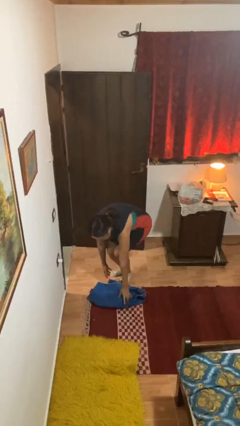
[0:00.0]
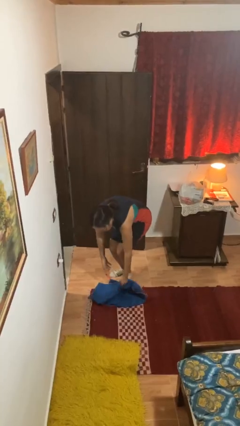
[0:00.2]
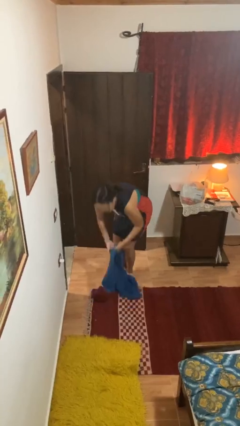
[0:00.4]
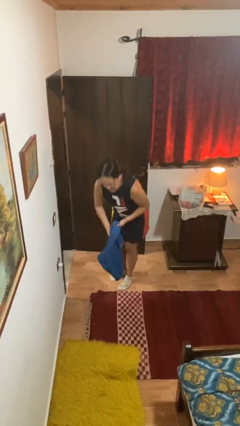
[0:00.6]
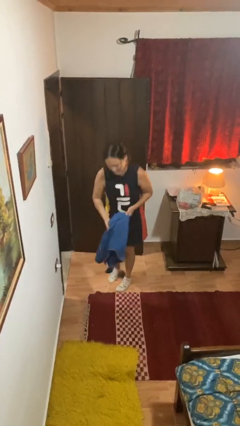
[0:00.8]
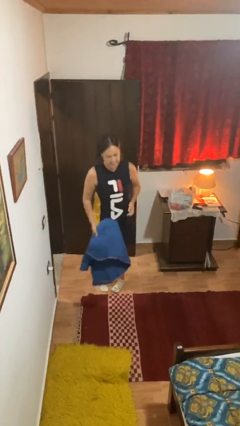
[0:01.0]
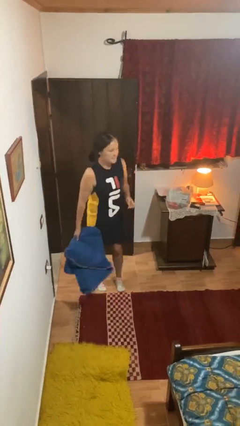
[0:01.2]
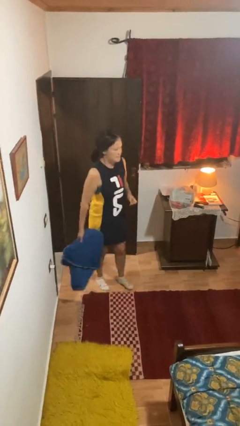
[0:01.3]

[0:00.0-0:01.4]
person picks up object from floor

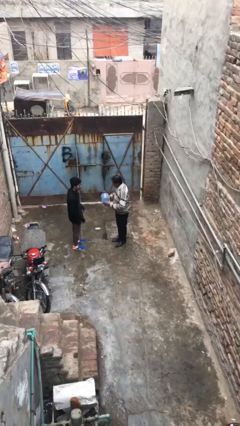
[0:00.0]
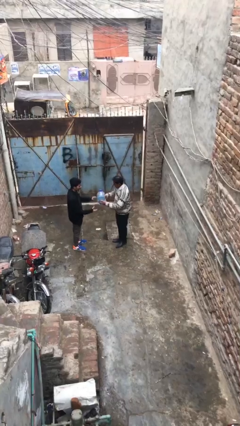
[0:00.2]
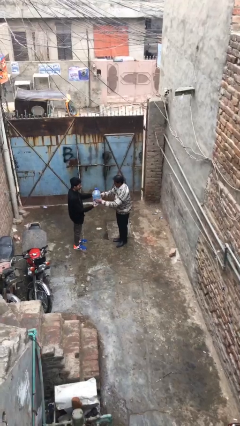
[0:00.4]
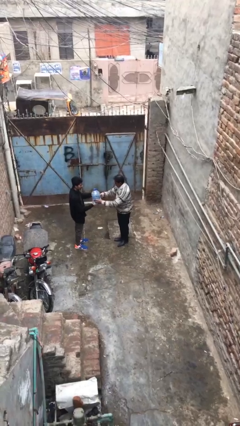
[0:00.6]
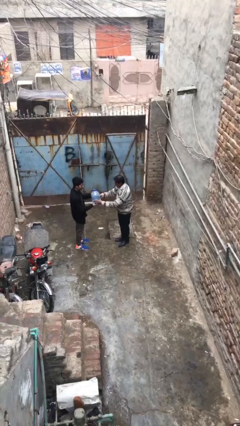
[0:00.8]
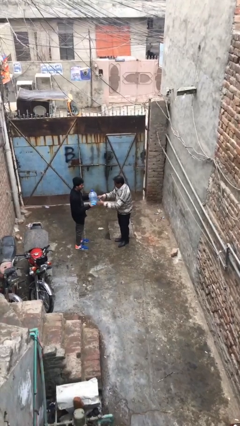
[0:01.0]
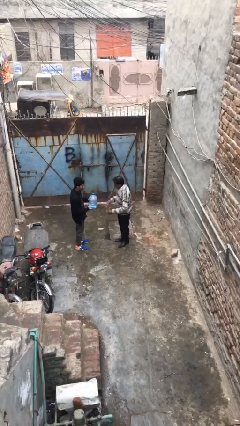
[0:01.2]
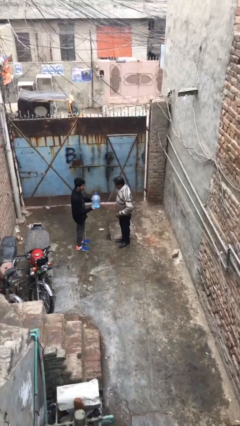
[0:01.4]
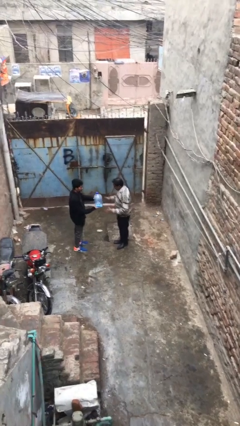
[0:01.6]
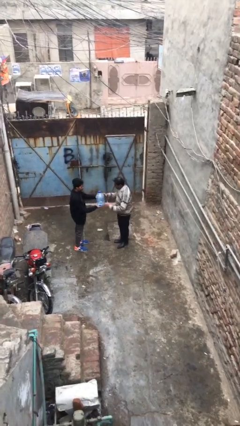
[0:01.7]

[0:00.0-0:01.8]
person transfers object to person

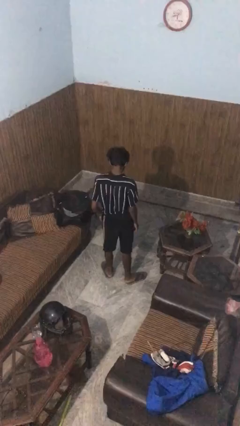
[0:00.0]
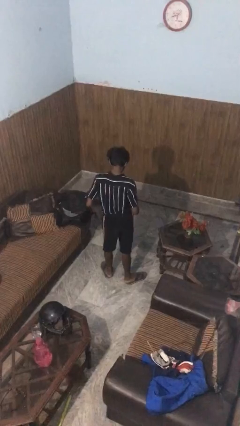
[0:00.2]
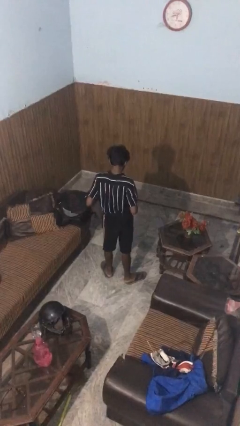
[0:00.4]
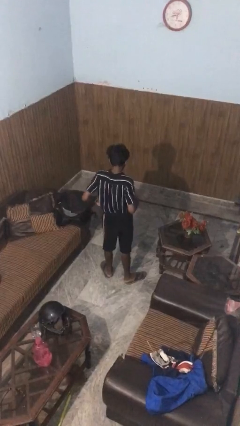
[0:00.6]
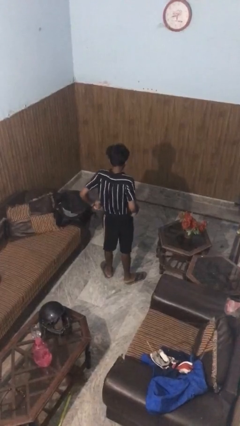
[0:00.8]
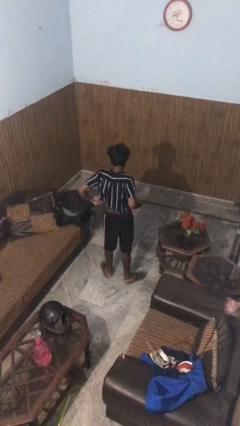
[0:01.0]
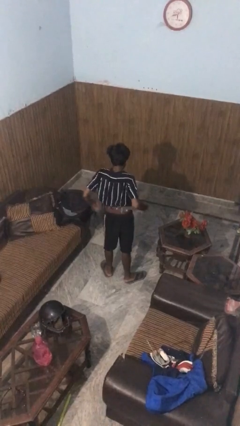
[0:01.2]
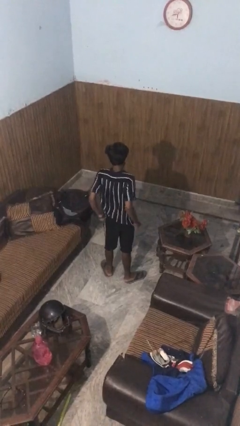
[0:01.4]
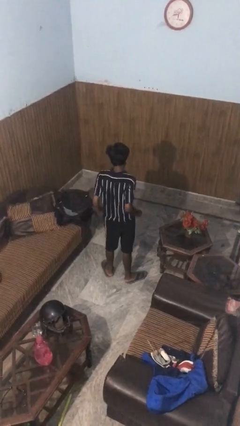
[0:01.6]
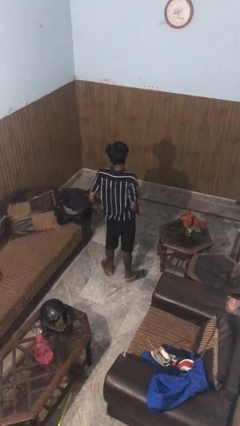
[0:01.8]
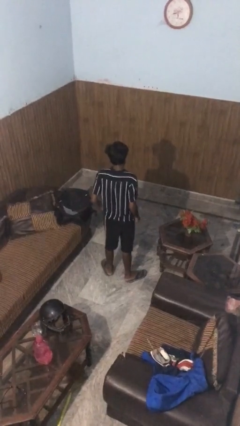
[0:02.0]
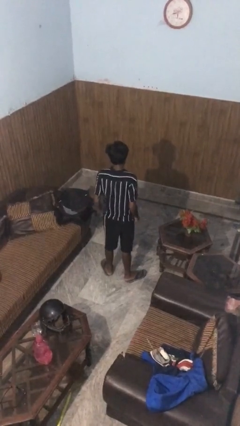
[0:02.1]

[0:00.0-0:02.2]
person untucks shirt

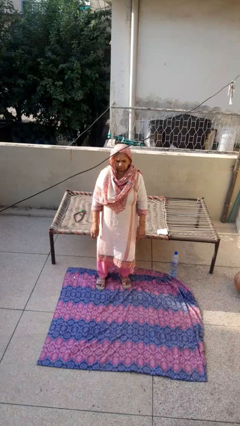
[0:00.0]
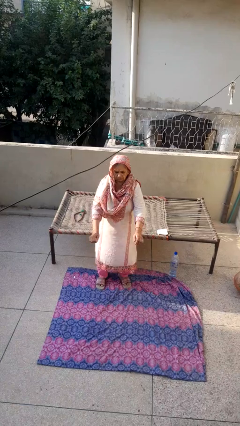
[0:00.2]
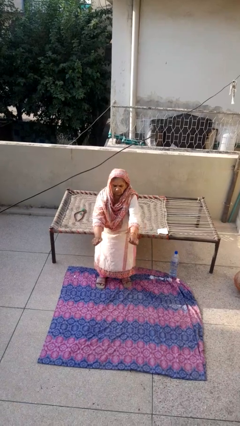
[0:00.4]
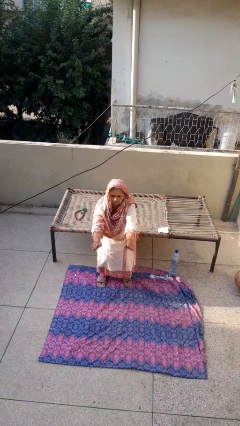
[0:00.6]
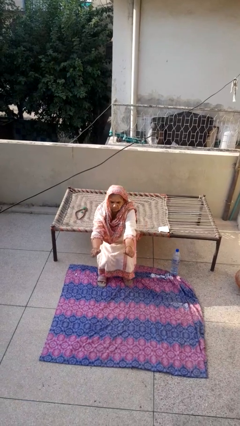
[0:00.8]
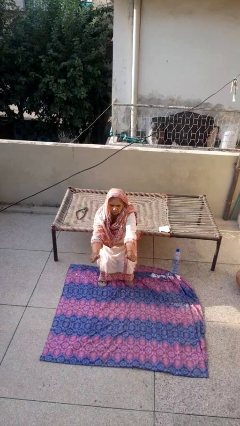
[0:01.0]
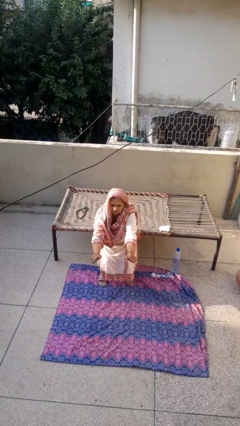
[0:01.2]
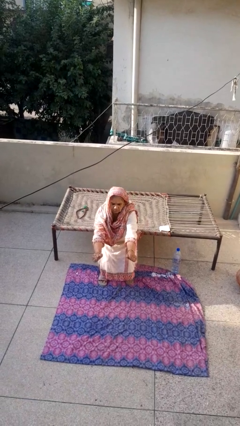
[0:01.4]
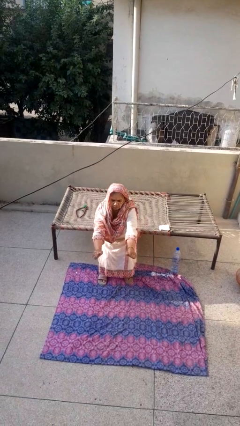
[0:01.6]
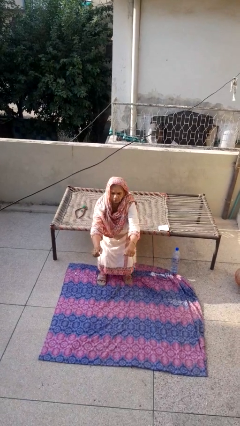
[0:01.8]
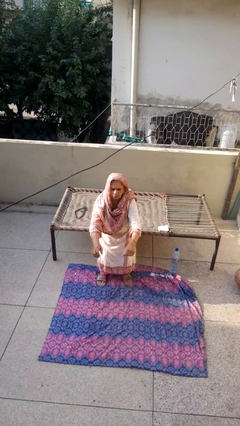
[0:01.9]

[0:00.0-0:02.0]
person squats

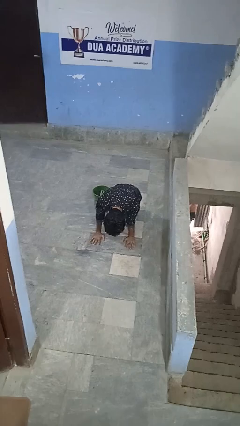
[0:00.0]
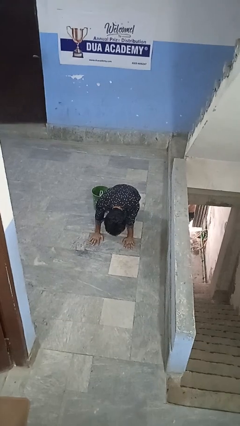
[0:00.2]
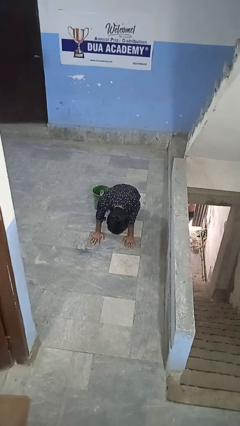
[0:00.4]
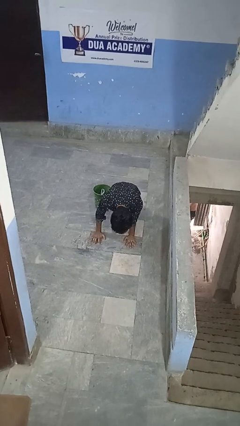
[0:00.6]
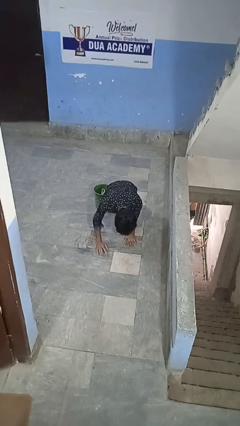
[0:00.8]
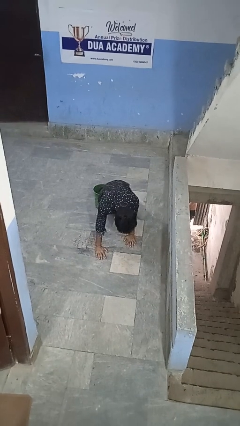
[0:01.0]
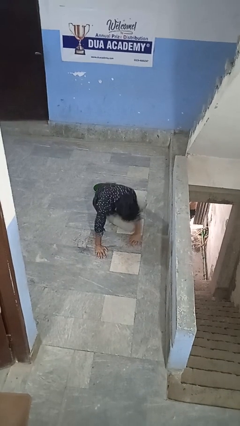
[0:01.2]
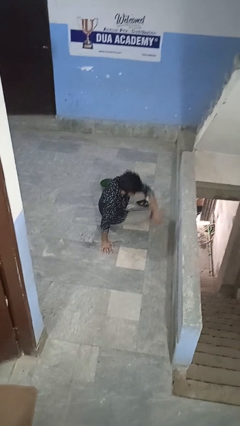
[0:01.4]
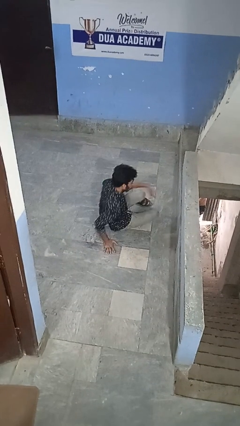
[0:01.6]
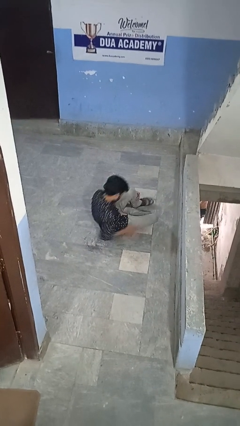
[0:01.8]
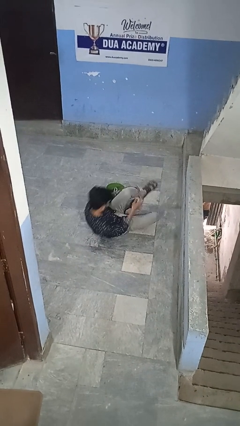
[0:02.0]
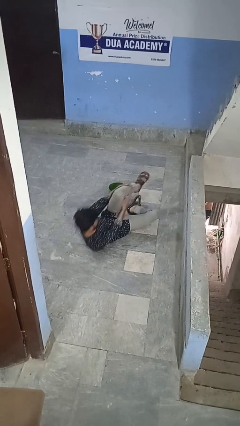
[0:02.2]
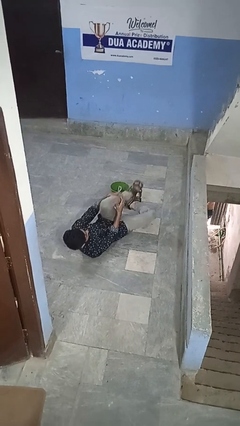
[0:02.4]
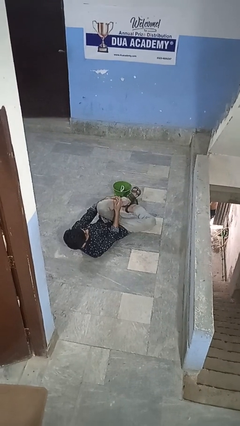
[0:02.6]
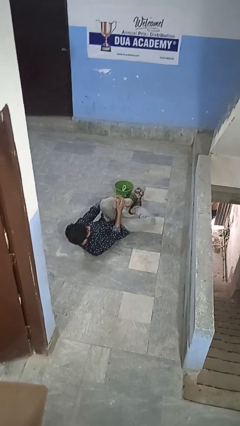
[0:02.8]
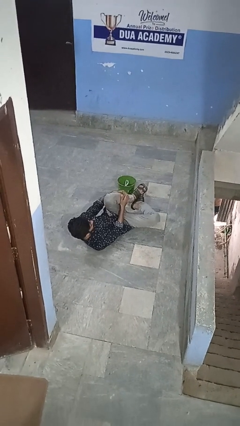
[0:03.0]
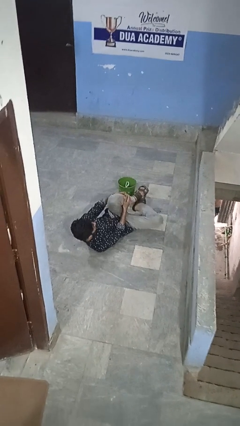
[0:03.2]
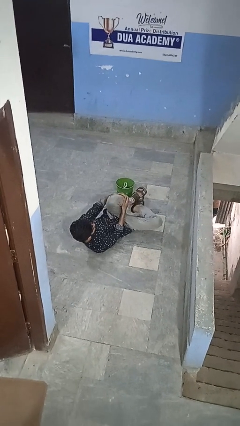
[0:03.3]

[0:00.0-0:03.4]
person lies down on floor

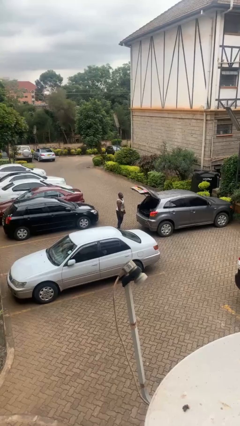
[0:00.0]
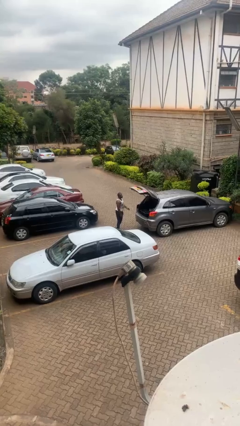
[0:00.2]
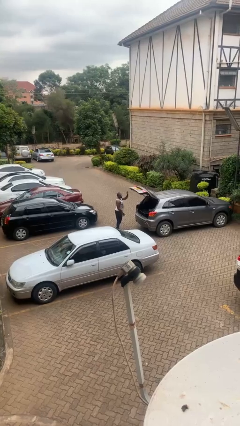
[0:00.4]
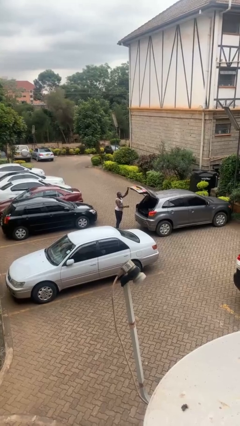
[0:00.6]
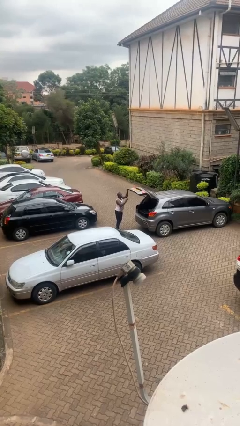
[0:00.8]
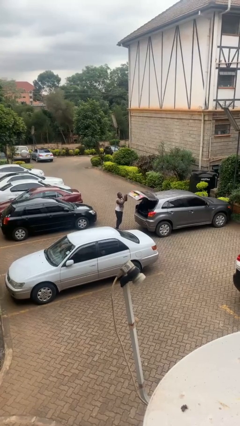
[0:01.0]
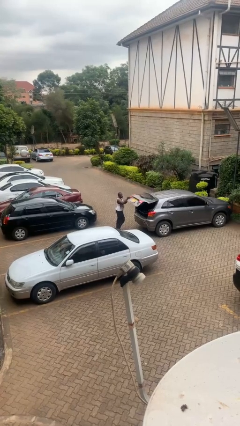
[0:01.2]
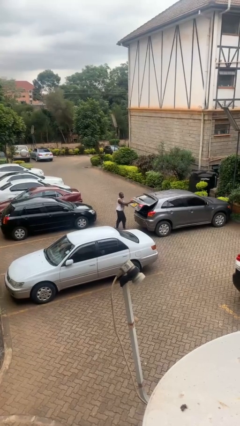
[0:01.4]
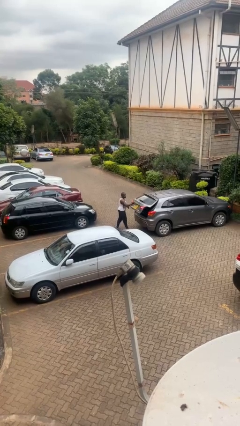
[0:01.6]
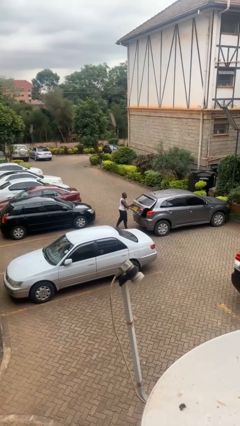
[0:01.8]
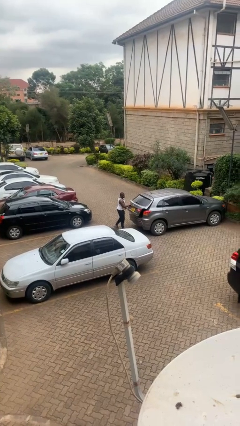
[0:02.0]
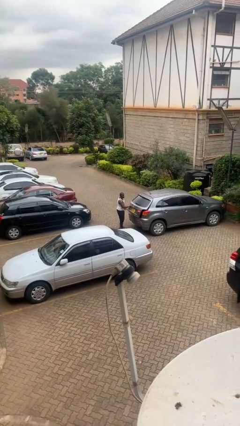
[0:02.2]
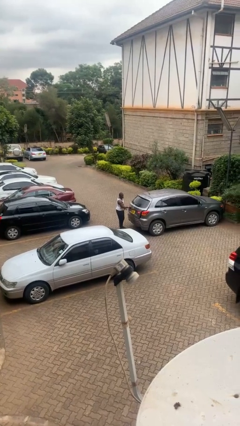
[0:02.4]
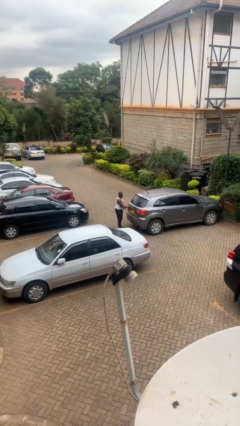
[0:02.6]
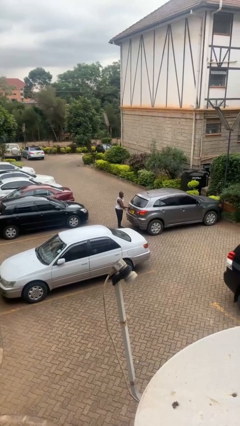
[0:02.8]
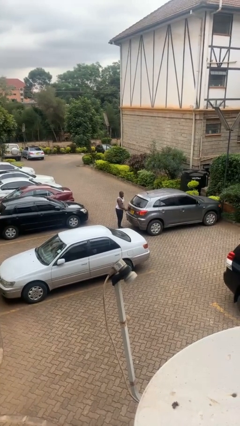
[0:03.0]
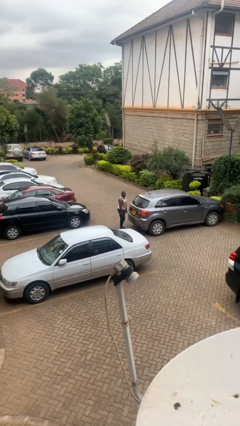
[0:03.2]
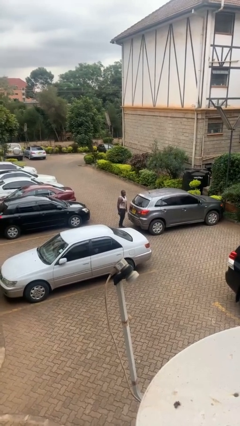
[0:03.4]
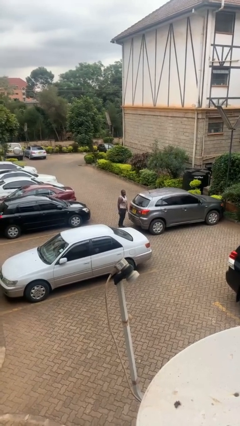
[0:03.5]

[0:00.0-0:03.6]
person closes car trunk

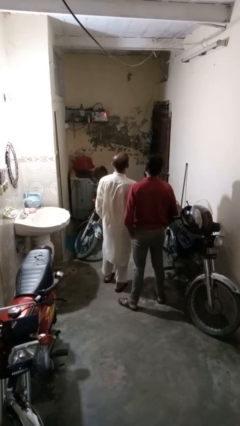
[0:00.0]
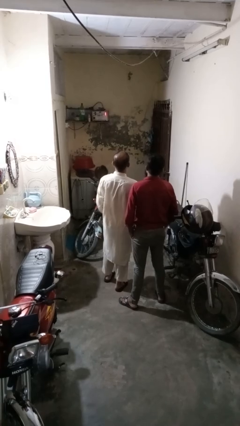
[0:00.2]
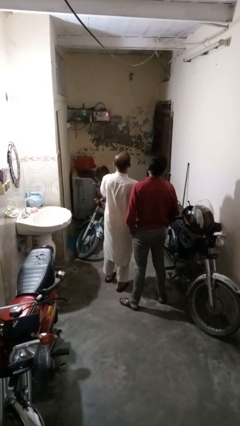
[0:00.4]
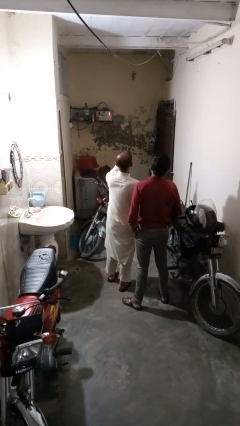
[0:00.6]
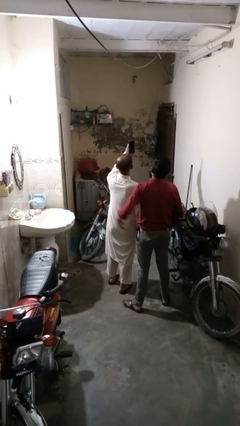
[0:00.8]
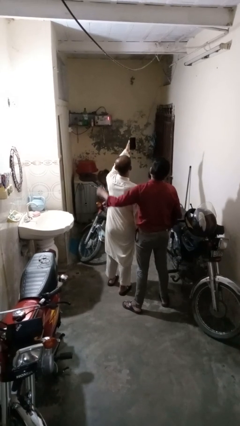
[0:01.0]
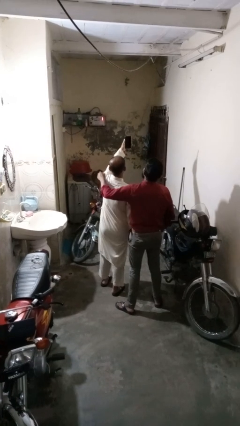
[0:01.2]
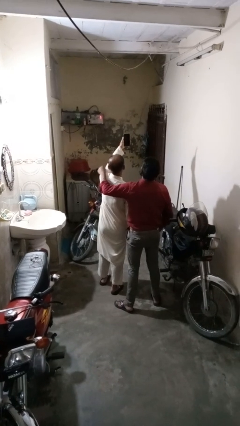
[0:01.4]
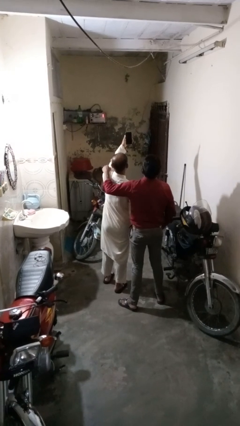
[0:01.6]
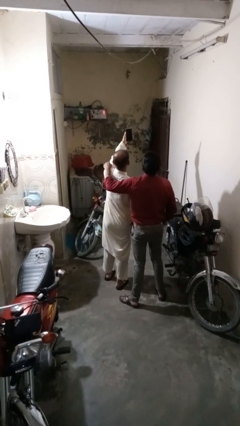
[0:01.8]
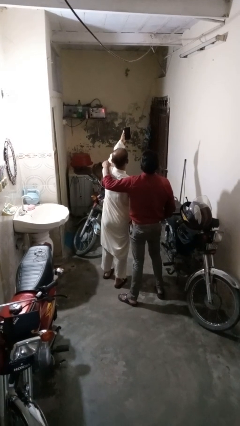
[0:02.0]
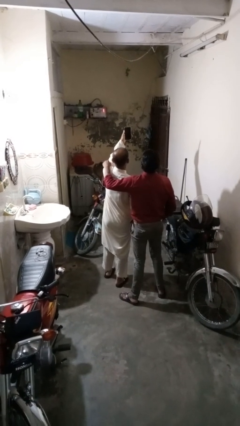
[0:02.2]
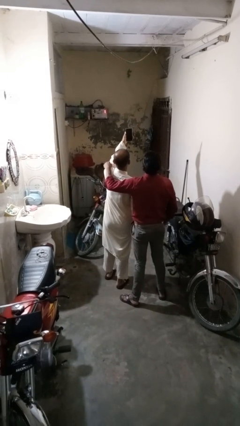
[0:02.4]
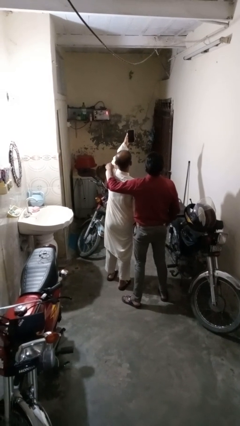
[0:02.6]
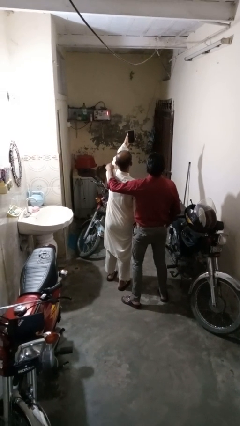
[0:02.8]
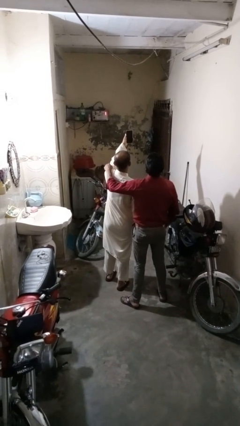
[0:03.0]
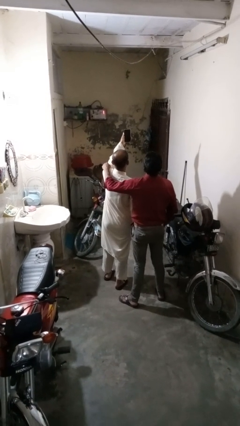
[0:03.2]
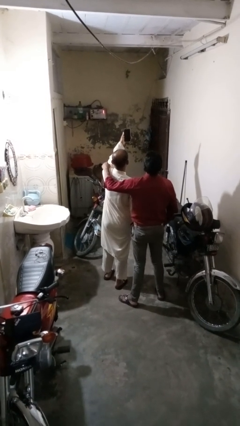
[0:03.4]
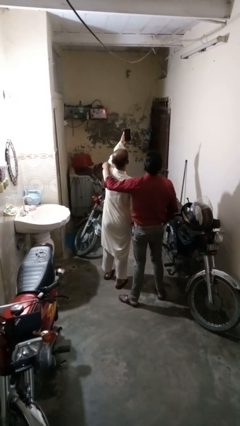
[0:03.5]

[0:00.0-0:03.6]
person takes selfie with person
